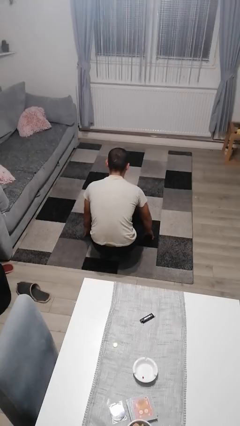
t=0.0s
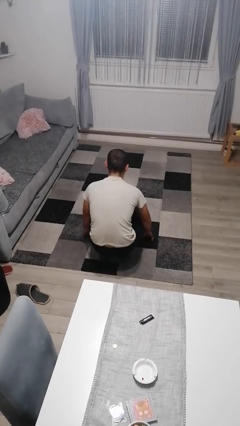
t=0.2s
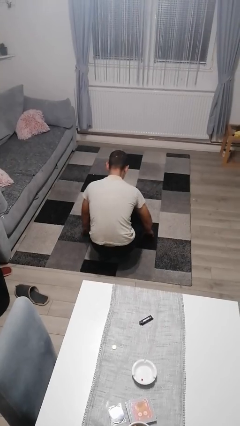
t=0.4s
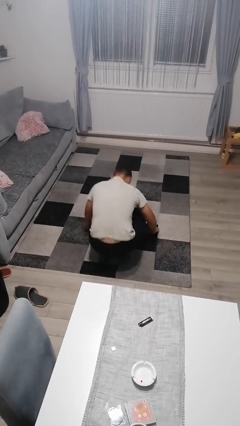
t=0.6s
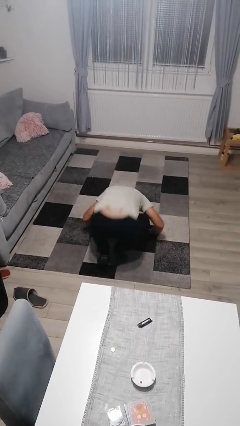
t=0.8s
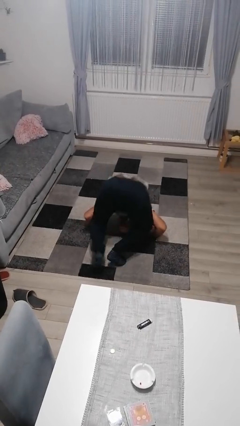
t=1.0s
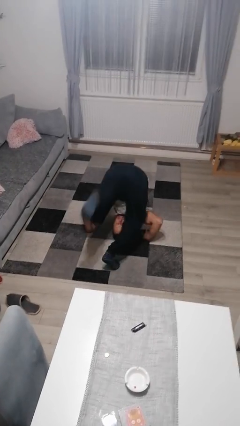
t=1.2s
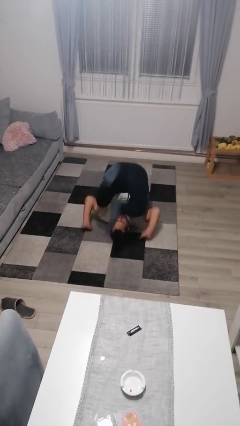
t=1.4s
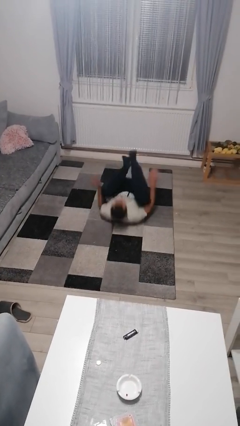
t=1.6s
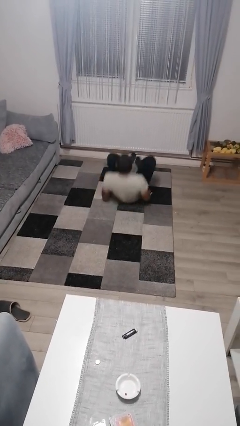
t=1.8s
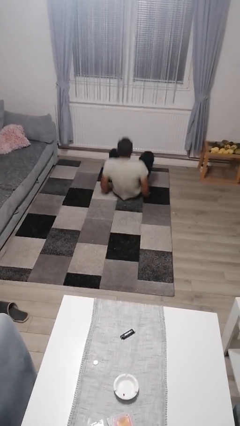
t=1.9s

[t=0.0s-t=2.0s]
person somersaults

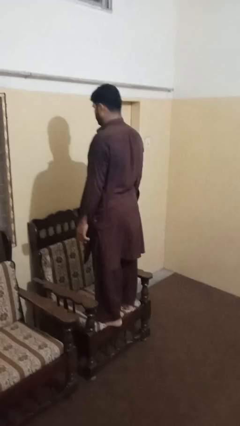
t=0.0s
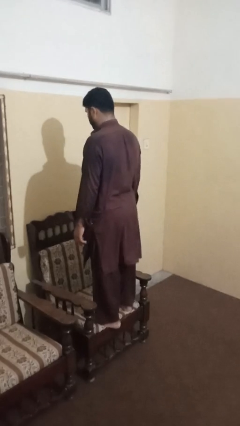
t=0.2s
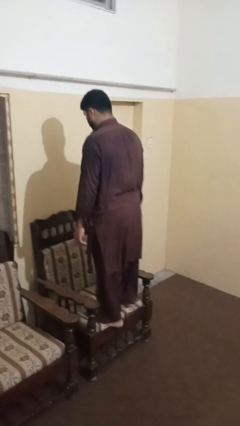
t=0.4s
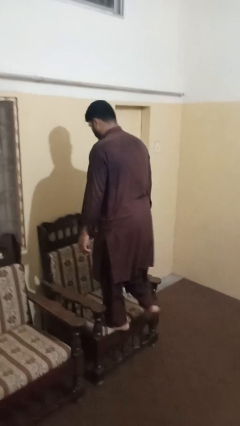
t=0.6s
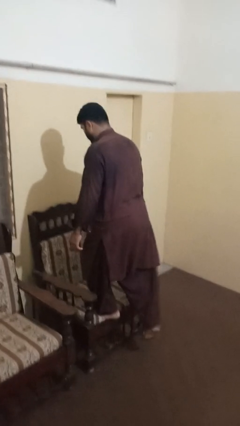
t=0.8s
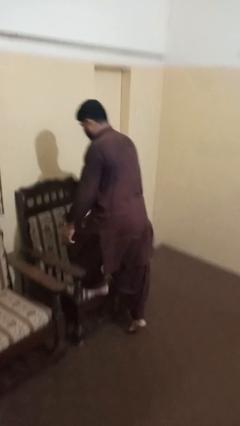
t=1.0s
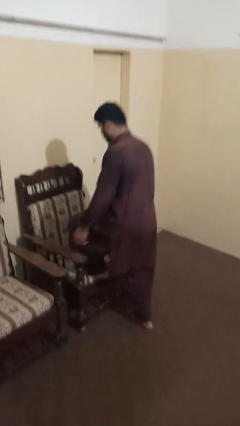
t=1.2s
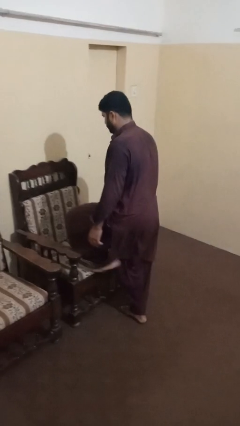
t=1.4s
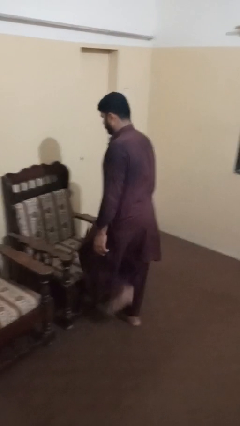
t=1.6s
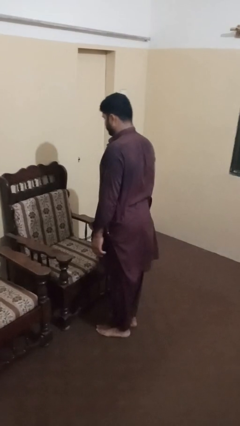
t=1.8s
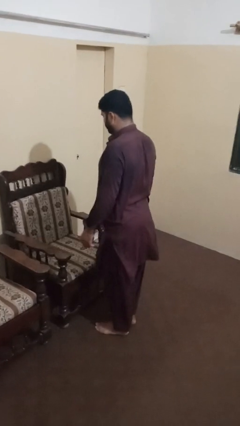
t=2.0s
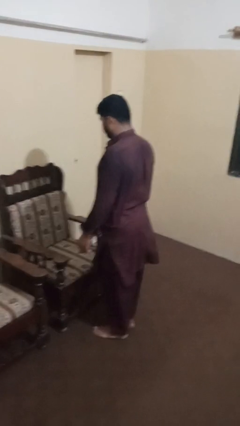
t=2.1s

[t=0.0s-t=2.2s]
person climbs off chair

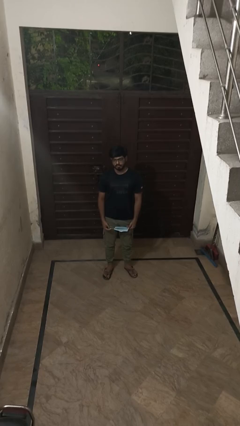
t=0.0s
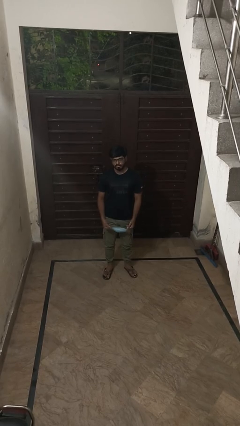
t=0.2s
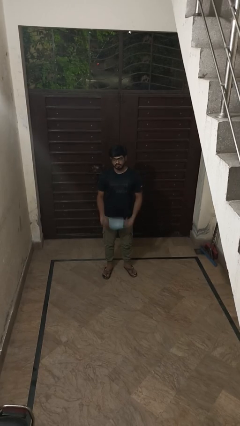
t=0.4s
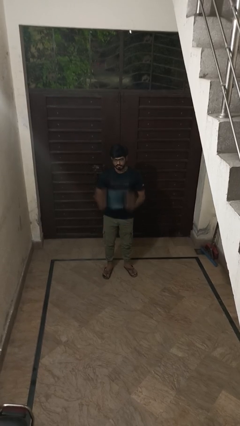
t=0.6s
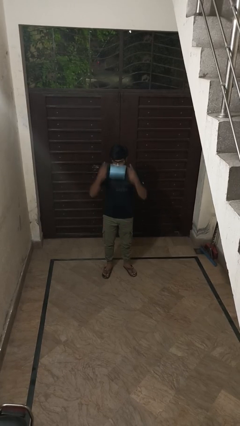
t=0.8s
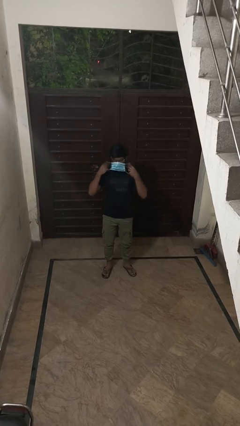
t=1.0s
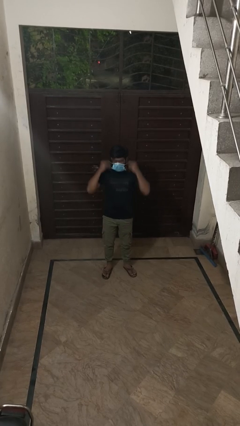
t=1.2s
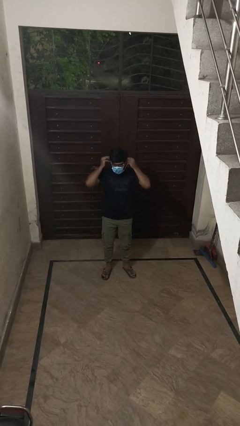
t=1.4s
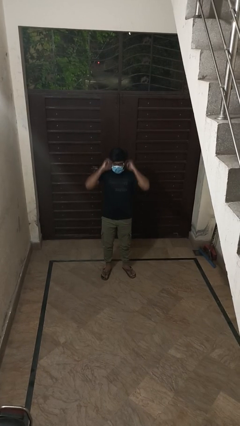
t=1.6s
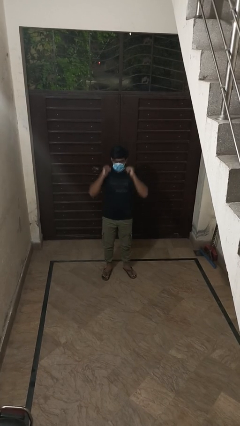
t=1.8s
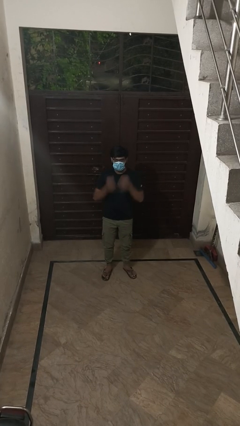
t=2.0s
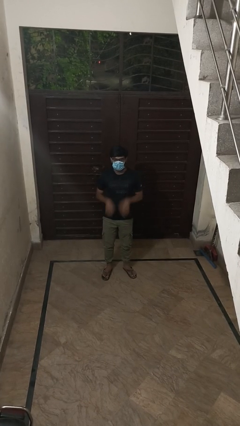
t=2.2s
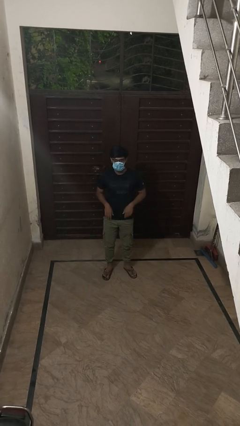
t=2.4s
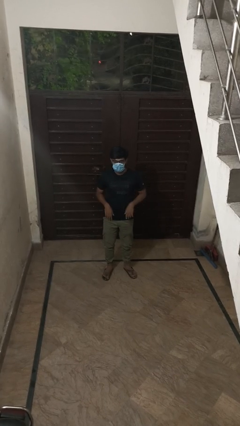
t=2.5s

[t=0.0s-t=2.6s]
person puts on facemask

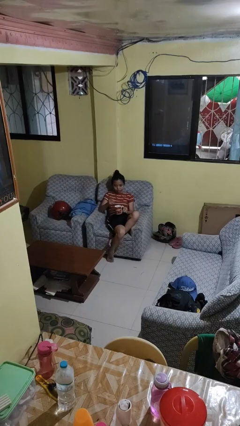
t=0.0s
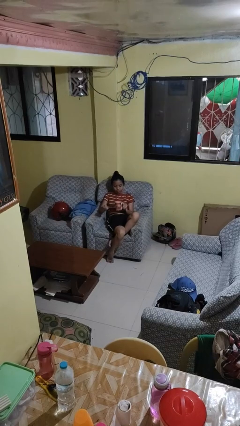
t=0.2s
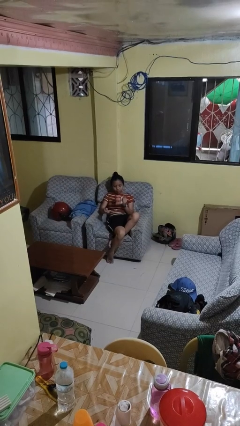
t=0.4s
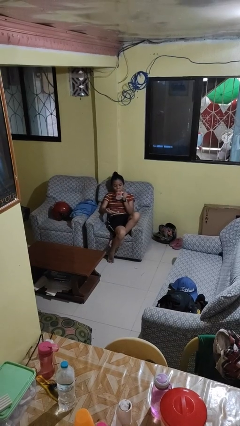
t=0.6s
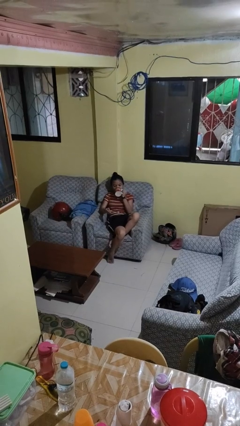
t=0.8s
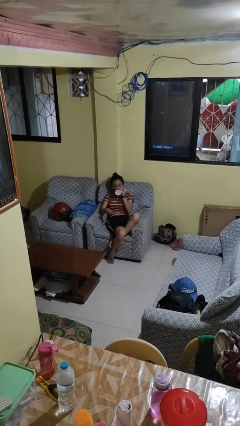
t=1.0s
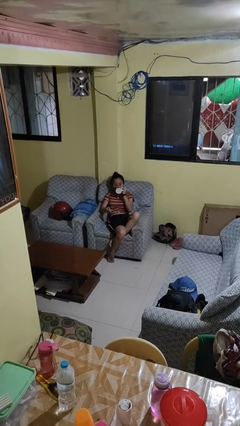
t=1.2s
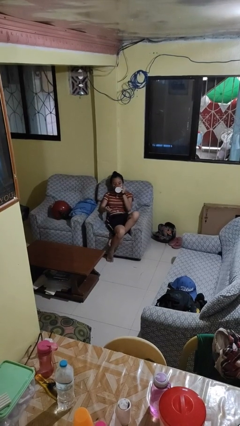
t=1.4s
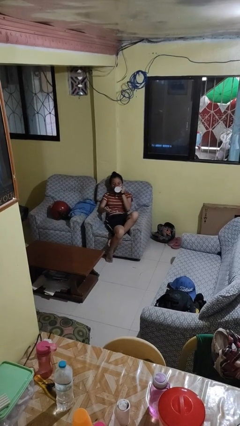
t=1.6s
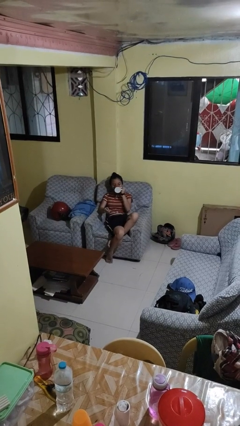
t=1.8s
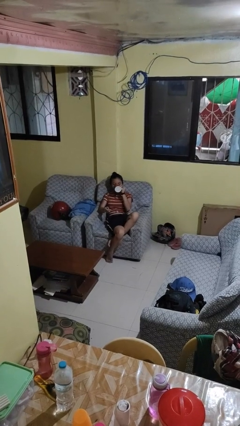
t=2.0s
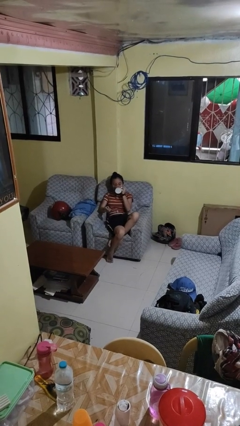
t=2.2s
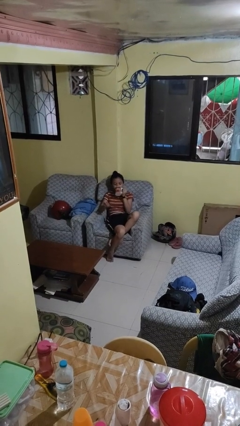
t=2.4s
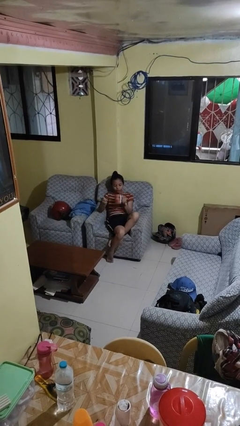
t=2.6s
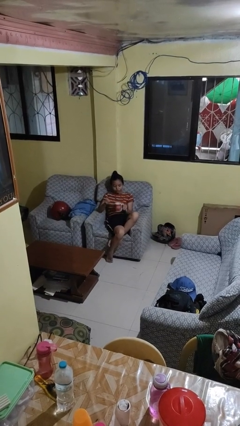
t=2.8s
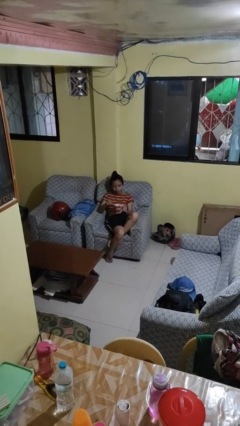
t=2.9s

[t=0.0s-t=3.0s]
person drinks from mug

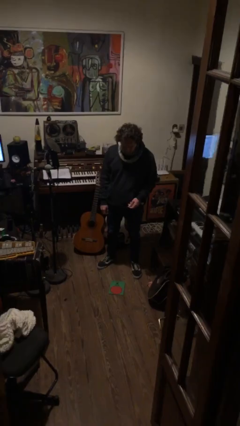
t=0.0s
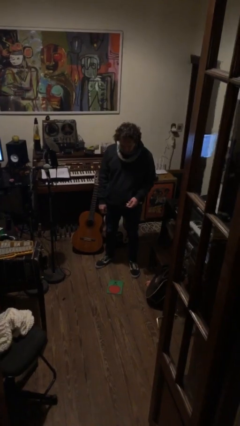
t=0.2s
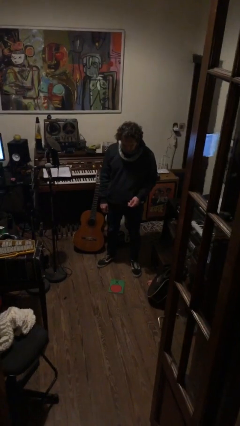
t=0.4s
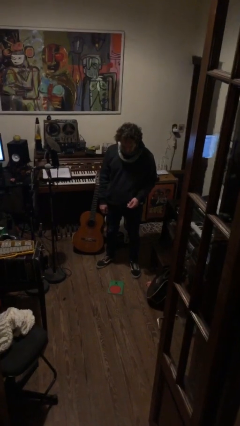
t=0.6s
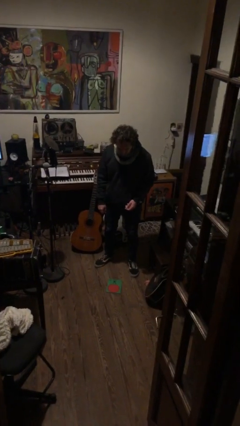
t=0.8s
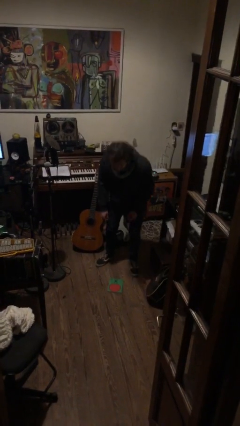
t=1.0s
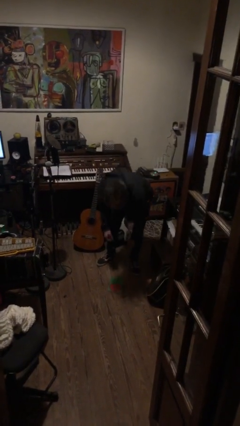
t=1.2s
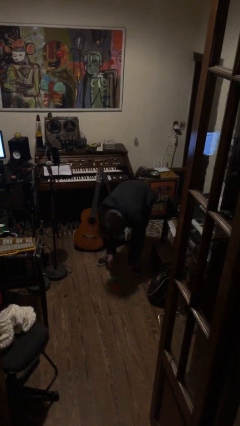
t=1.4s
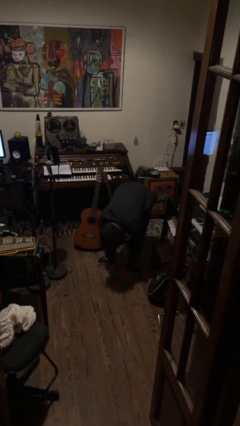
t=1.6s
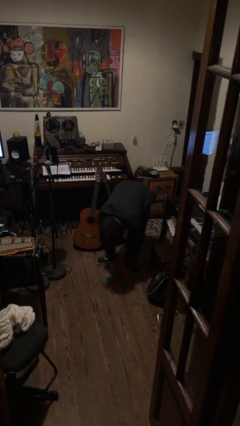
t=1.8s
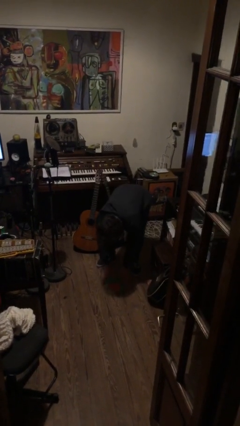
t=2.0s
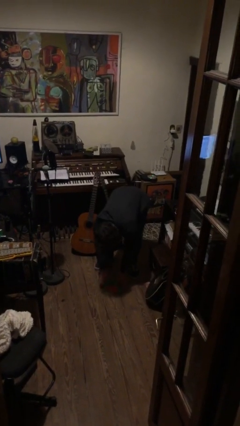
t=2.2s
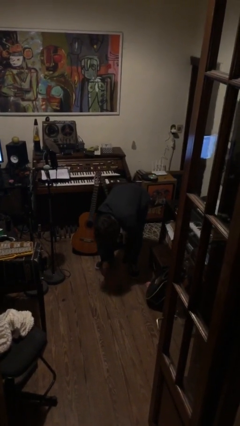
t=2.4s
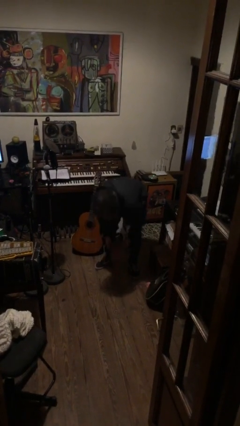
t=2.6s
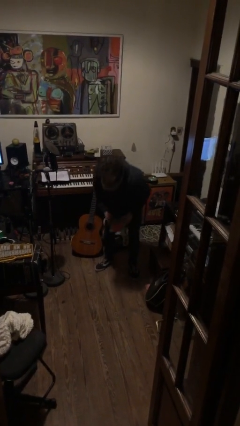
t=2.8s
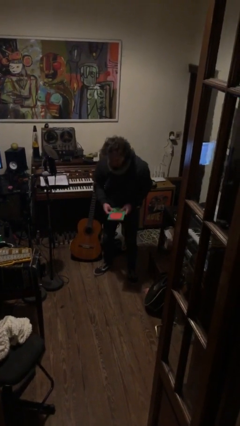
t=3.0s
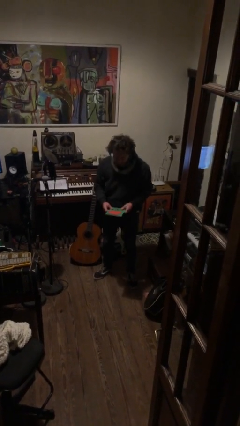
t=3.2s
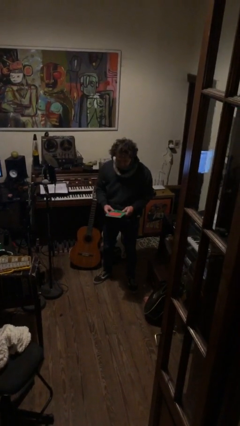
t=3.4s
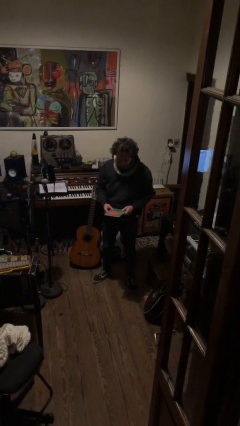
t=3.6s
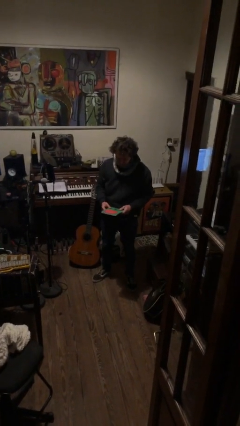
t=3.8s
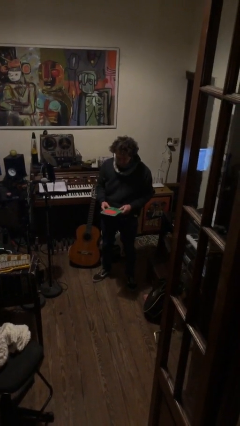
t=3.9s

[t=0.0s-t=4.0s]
person picks up object from floor

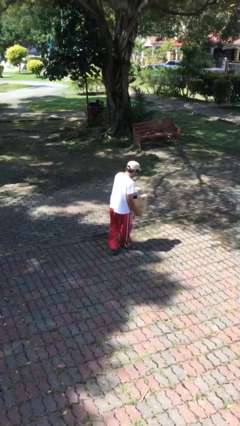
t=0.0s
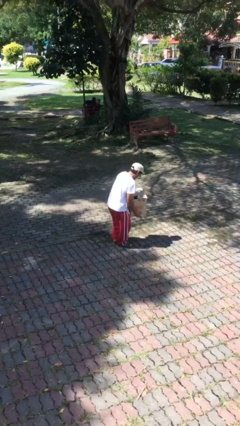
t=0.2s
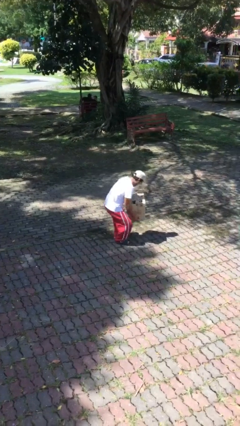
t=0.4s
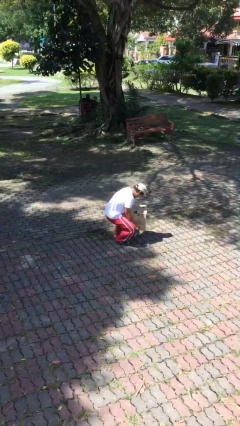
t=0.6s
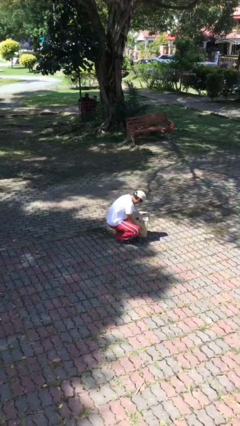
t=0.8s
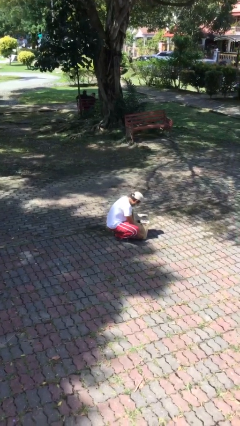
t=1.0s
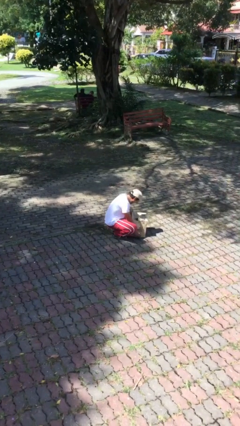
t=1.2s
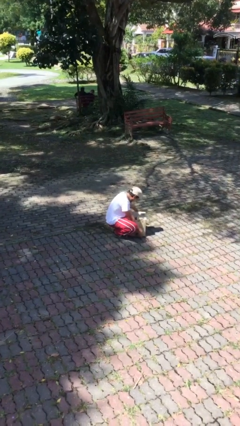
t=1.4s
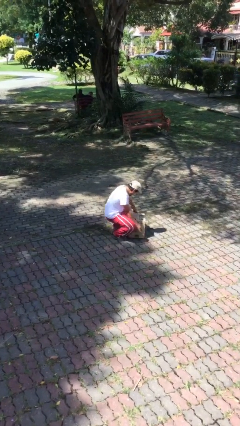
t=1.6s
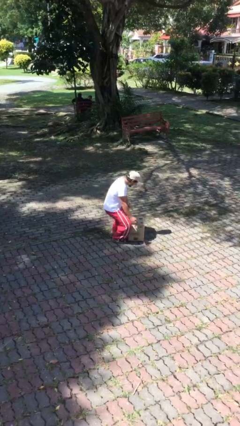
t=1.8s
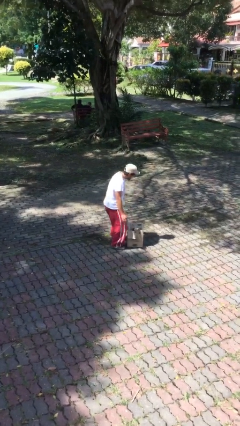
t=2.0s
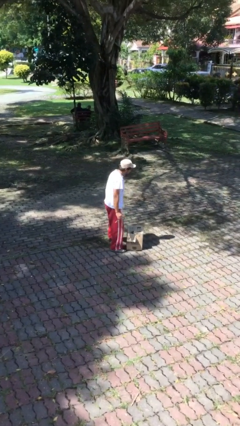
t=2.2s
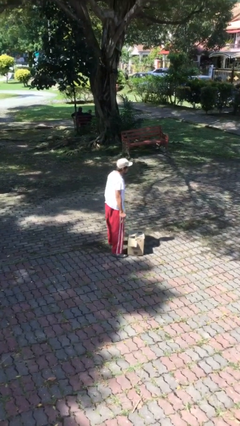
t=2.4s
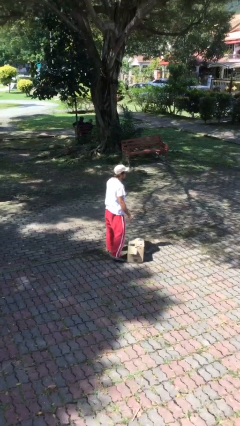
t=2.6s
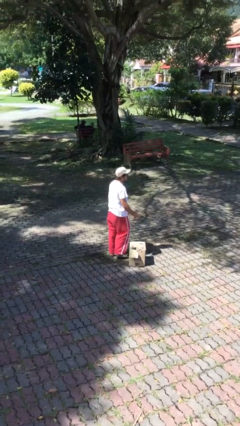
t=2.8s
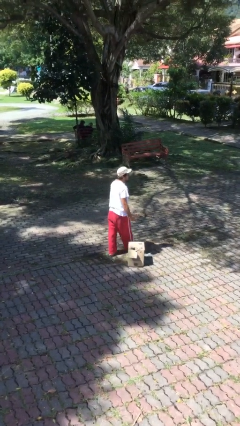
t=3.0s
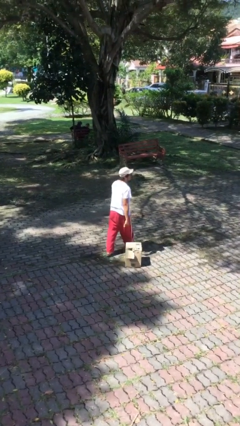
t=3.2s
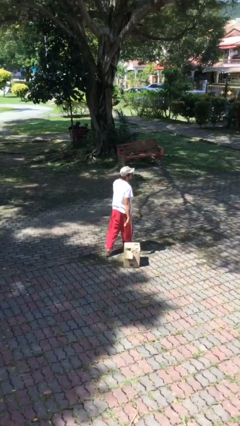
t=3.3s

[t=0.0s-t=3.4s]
person puts down object on floor
